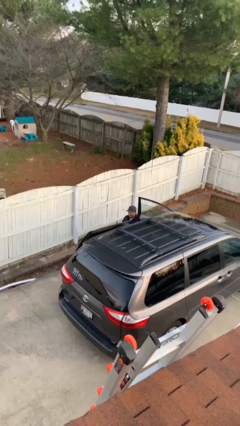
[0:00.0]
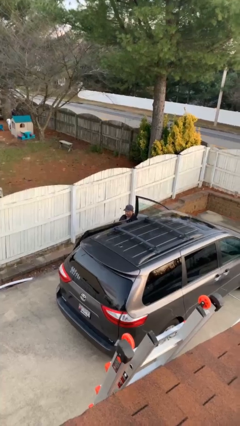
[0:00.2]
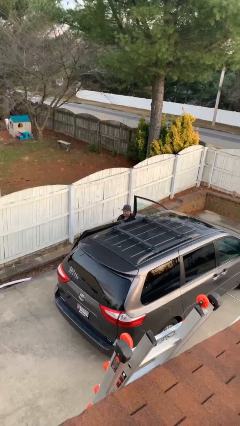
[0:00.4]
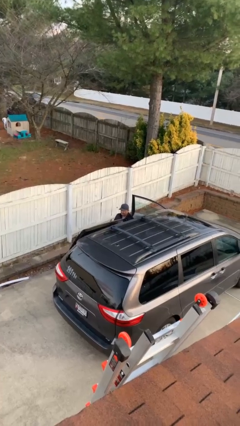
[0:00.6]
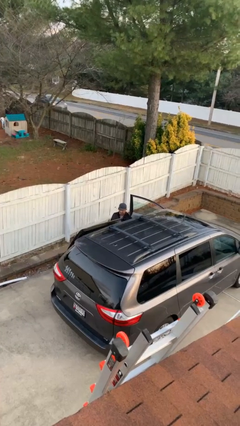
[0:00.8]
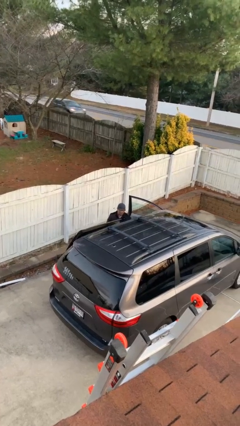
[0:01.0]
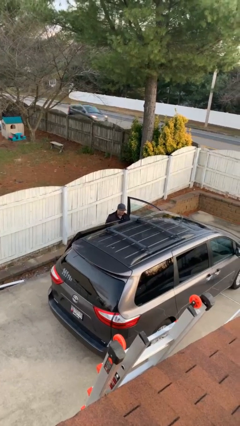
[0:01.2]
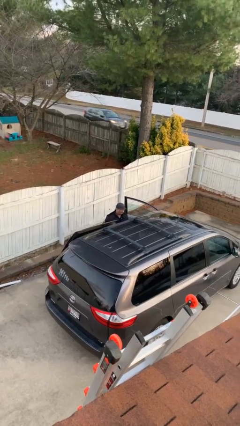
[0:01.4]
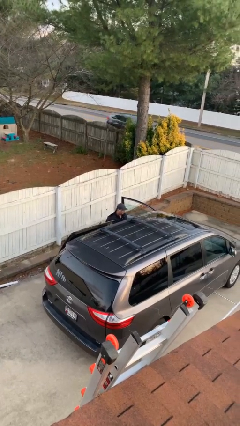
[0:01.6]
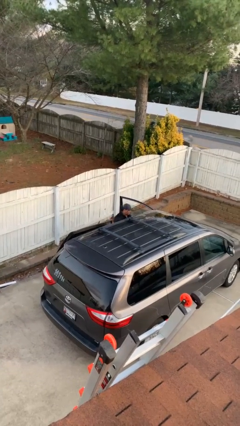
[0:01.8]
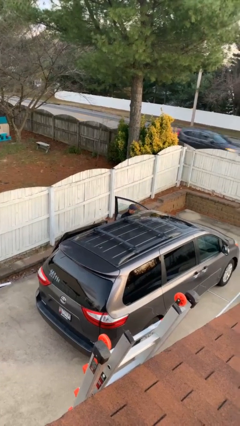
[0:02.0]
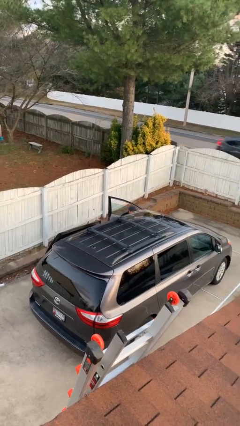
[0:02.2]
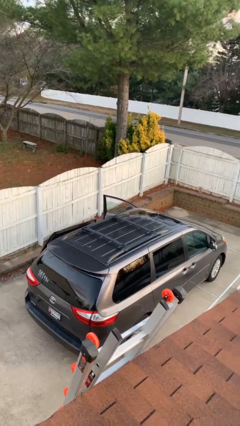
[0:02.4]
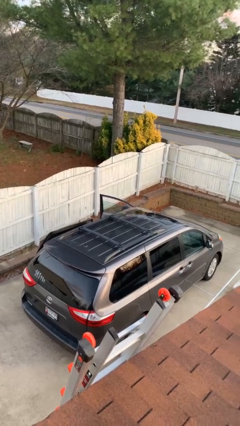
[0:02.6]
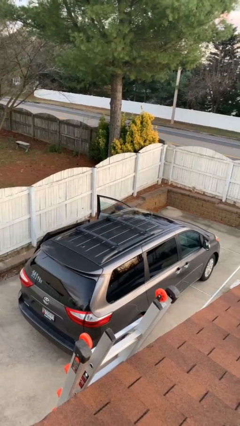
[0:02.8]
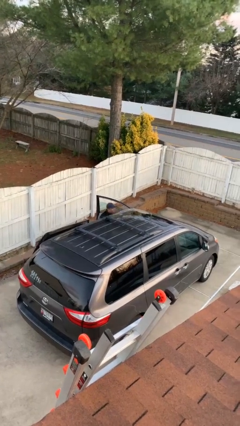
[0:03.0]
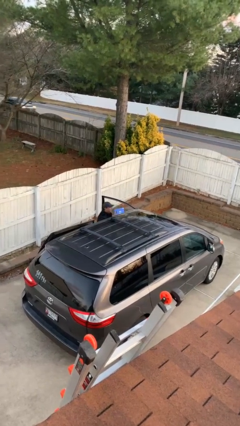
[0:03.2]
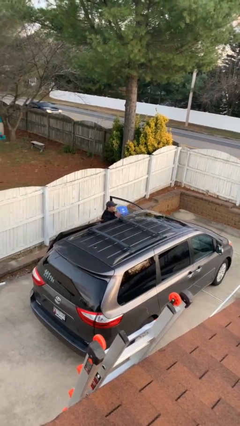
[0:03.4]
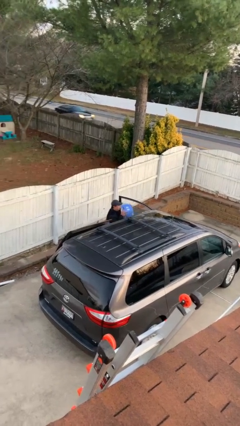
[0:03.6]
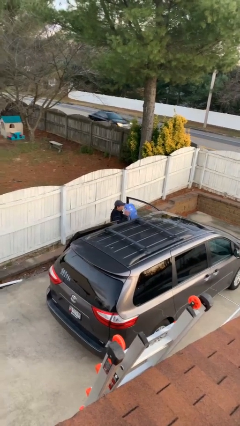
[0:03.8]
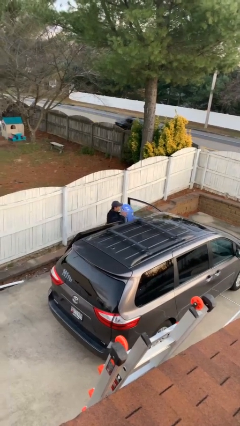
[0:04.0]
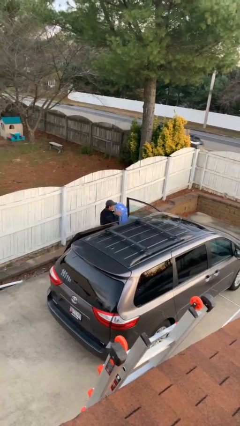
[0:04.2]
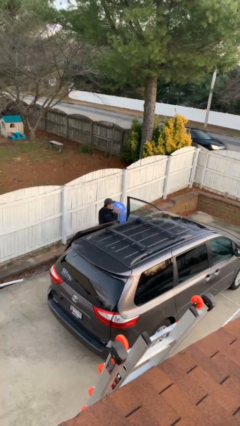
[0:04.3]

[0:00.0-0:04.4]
person unloads car

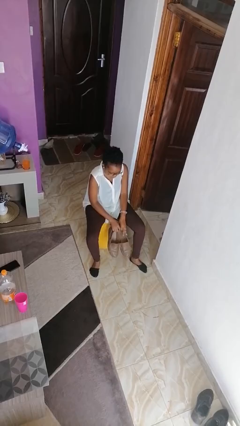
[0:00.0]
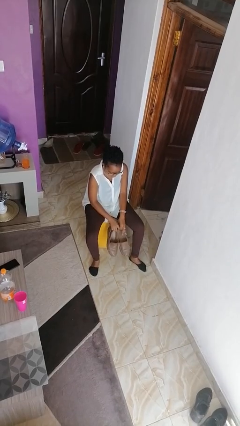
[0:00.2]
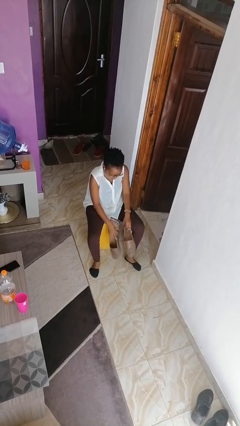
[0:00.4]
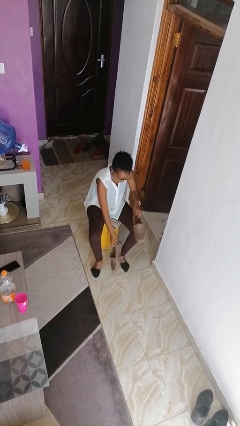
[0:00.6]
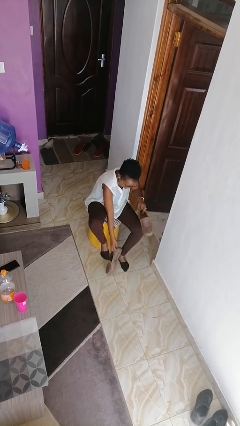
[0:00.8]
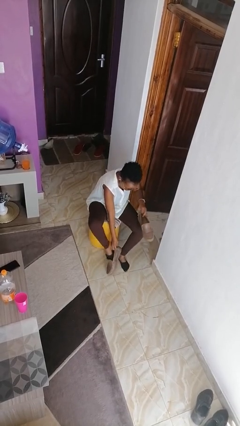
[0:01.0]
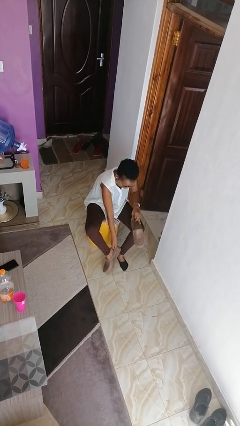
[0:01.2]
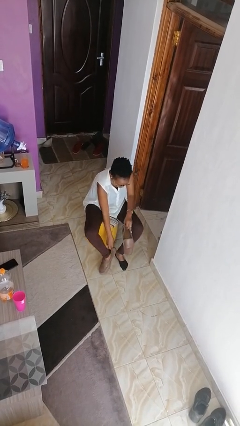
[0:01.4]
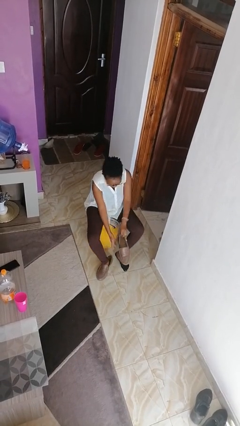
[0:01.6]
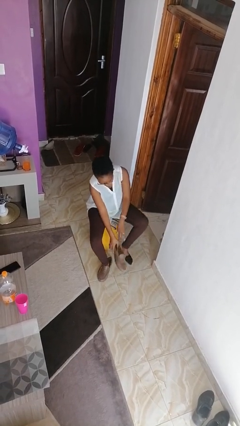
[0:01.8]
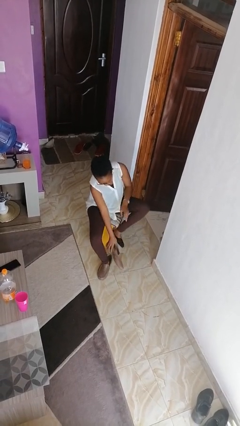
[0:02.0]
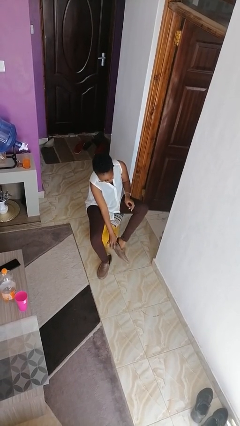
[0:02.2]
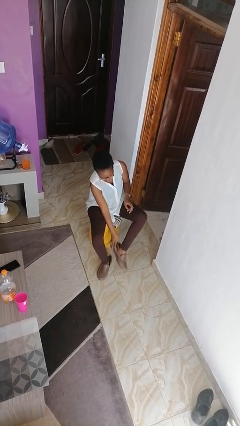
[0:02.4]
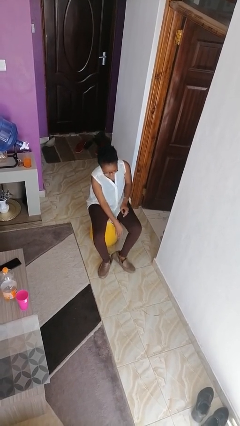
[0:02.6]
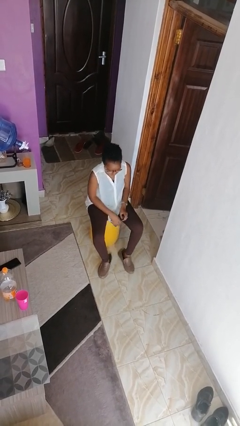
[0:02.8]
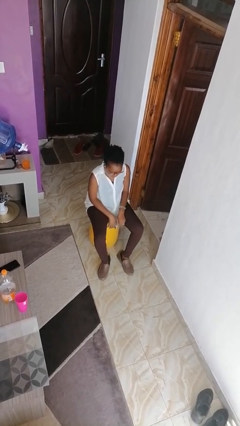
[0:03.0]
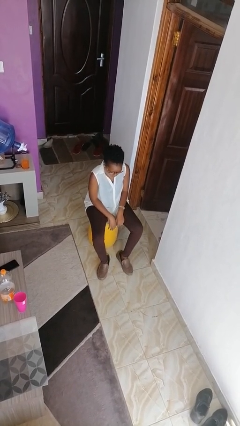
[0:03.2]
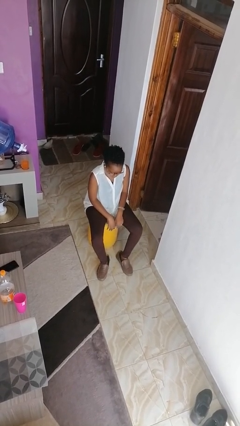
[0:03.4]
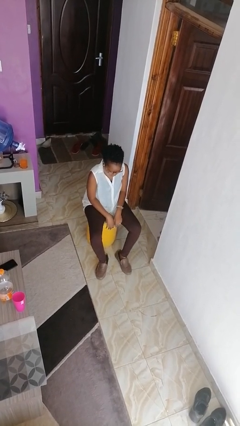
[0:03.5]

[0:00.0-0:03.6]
person puts on shoes

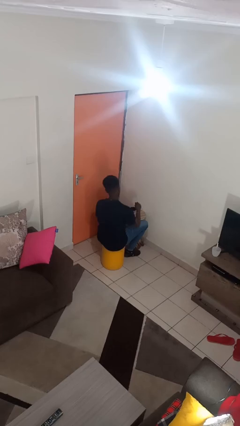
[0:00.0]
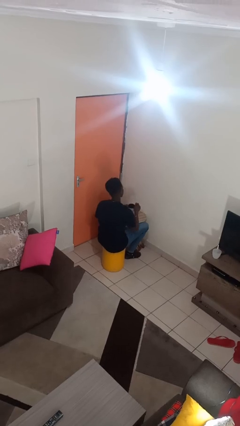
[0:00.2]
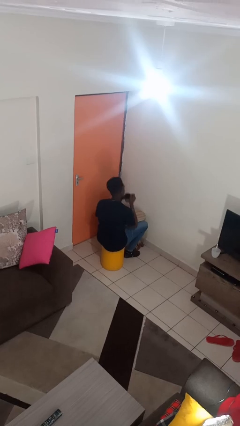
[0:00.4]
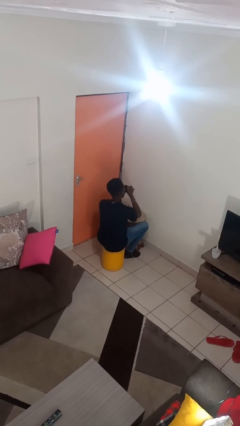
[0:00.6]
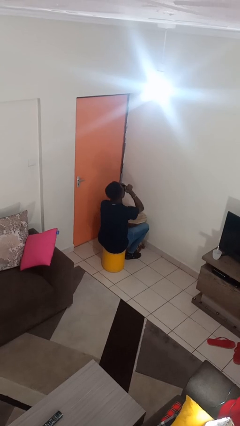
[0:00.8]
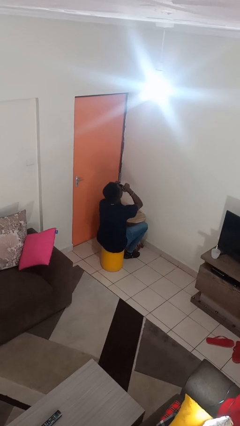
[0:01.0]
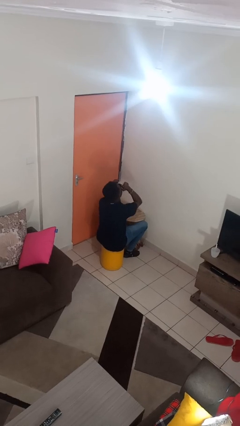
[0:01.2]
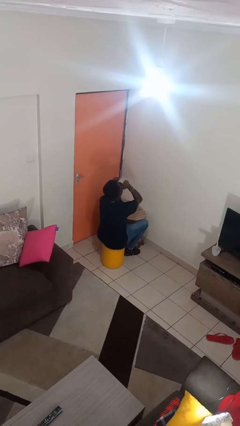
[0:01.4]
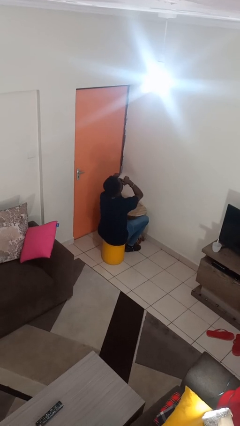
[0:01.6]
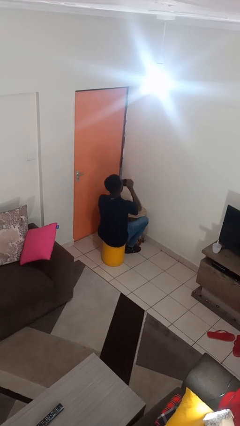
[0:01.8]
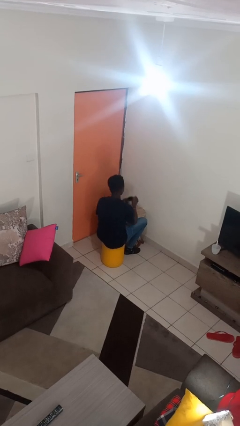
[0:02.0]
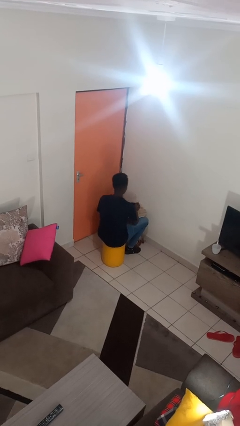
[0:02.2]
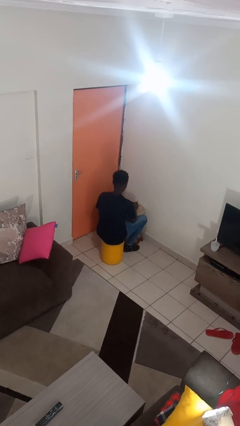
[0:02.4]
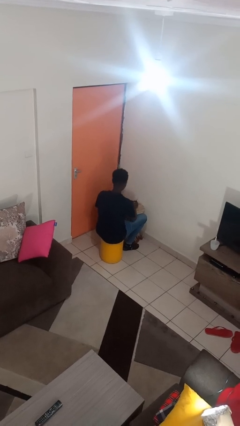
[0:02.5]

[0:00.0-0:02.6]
person drinks from mug

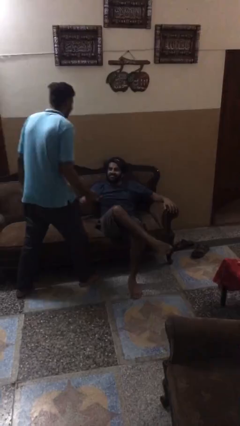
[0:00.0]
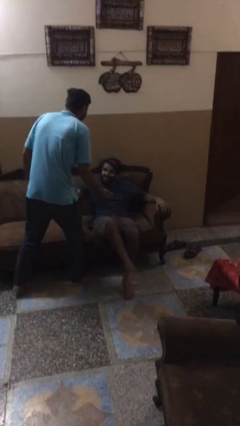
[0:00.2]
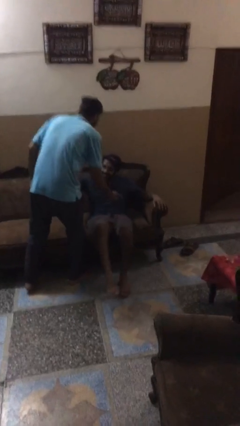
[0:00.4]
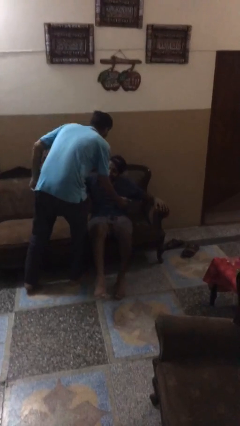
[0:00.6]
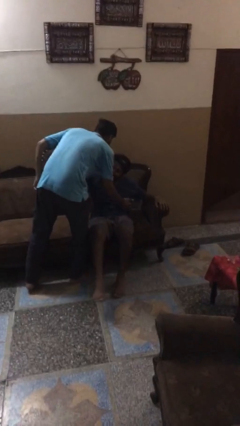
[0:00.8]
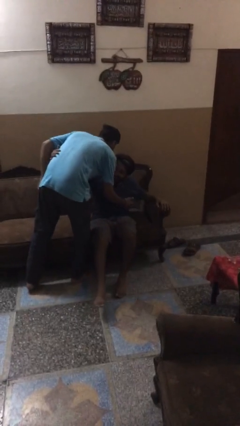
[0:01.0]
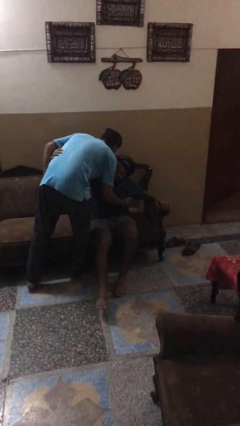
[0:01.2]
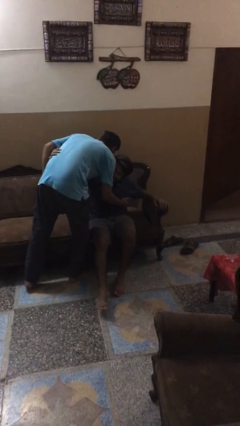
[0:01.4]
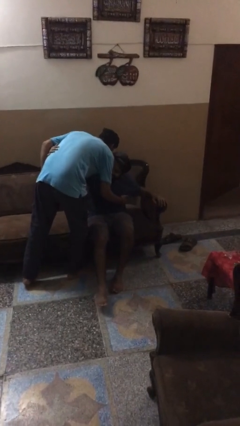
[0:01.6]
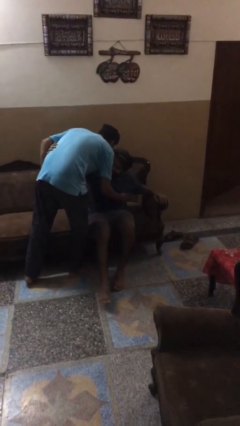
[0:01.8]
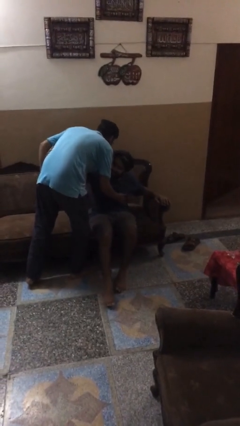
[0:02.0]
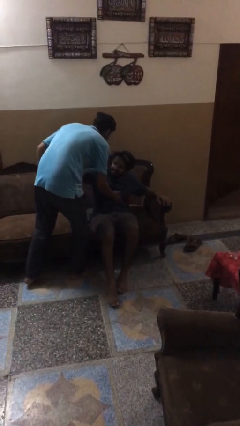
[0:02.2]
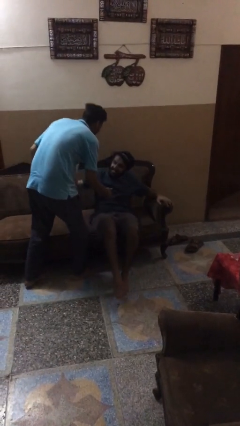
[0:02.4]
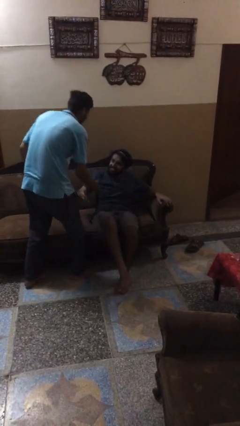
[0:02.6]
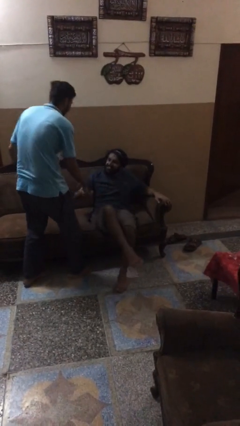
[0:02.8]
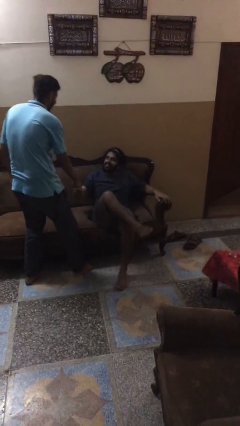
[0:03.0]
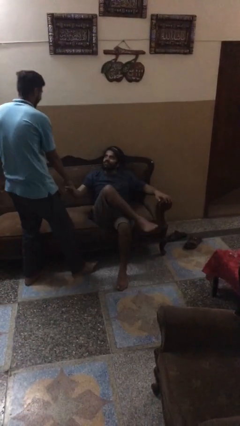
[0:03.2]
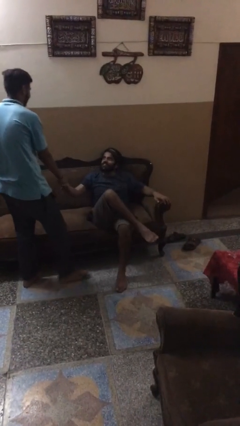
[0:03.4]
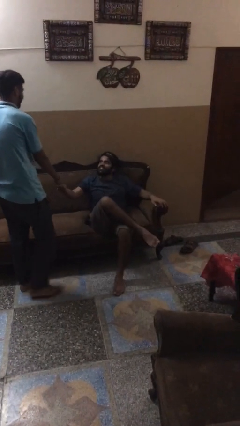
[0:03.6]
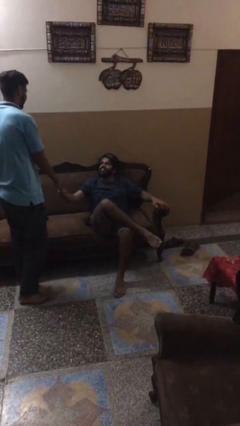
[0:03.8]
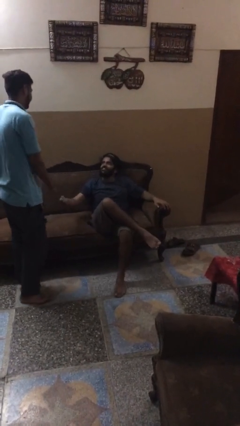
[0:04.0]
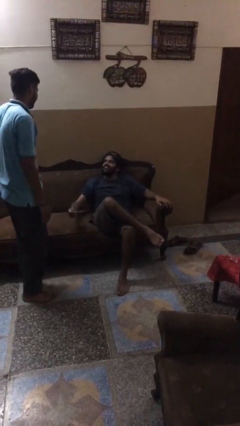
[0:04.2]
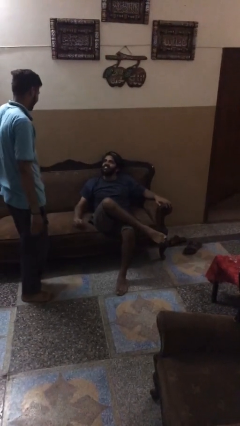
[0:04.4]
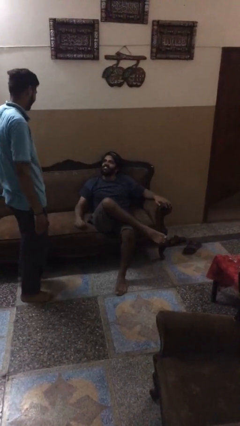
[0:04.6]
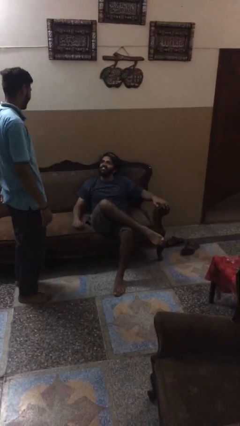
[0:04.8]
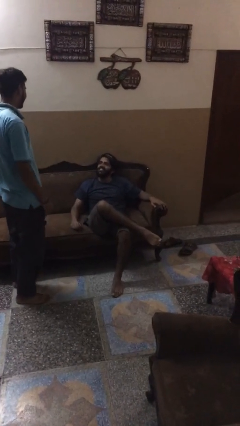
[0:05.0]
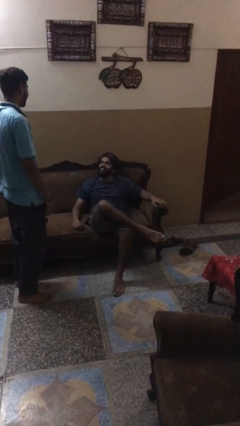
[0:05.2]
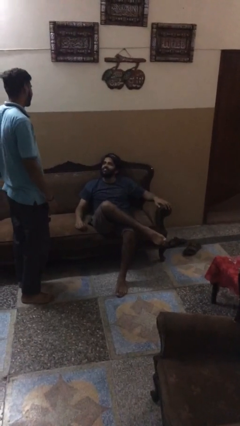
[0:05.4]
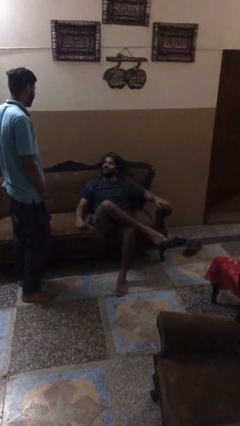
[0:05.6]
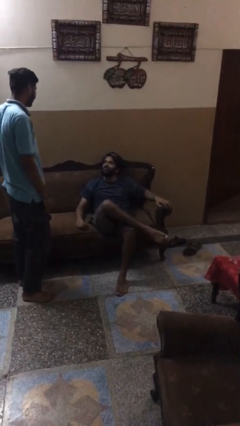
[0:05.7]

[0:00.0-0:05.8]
person embraces person

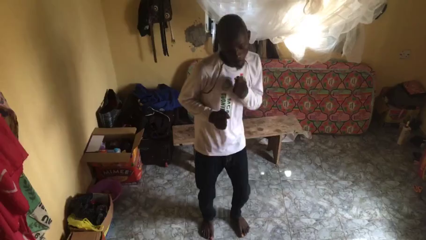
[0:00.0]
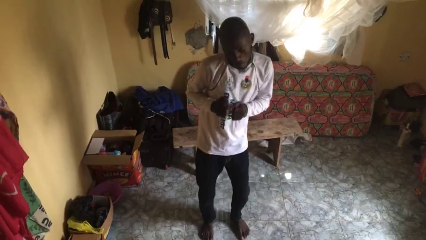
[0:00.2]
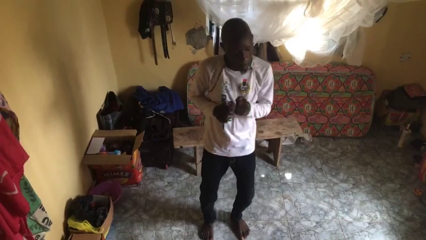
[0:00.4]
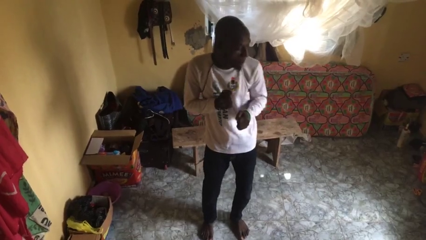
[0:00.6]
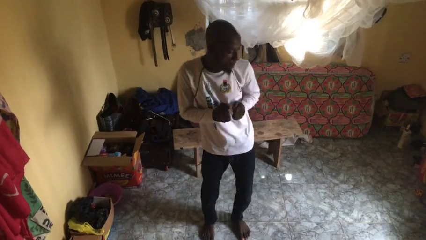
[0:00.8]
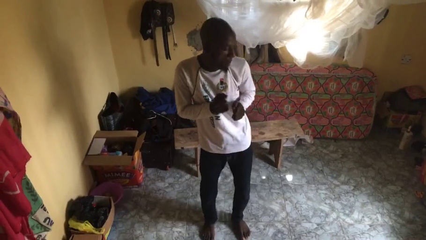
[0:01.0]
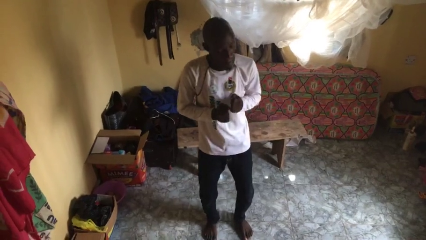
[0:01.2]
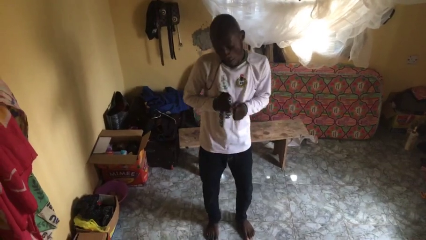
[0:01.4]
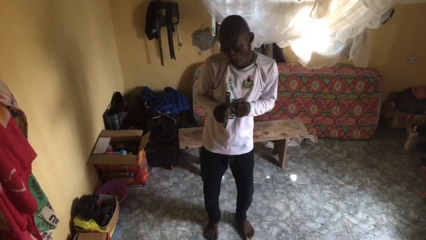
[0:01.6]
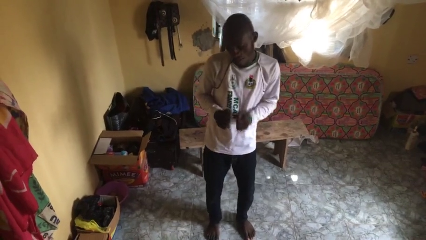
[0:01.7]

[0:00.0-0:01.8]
person dances in place
